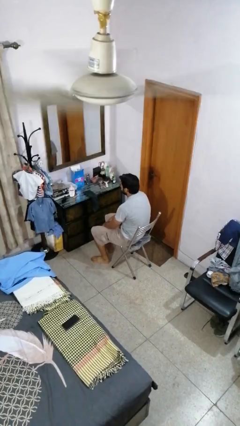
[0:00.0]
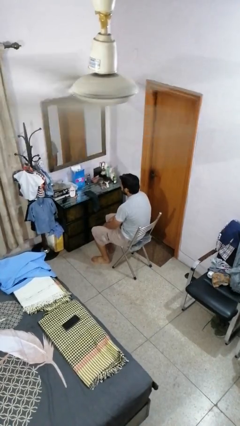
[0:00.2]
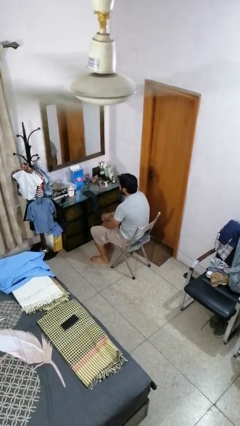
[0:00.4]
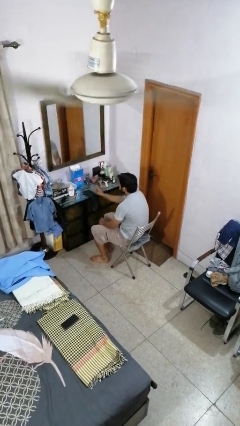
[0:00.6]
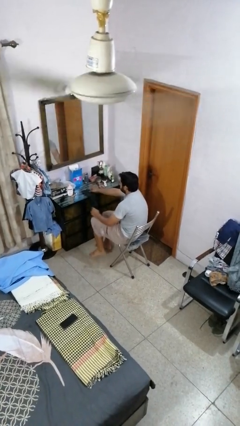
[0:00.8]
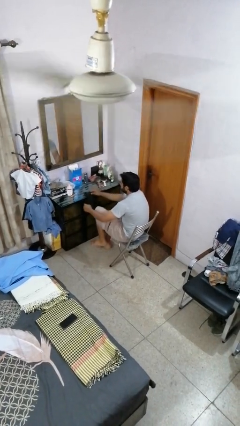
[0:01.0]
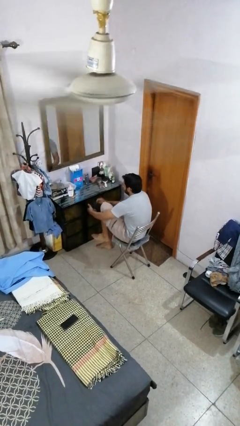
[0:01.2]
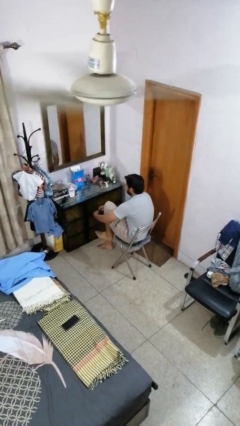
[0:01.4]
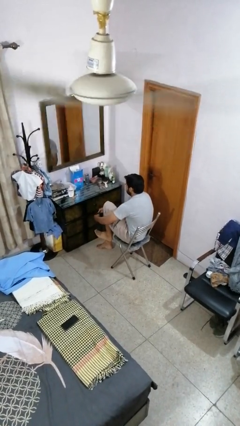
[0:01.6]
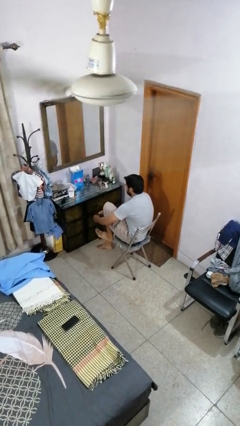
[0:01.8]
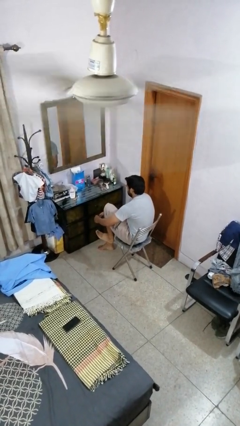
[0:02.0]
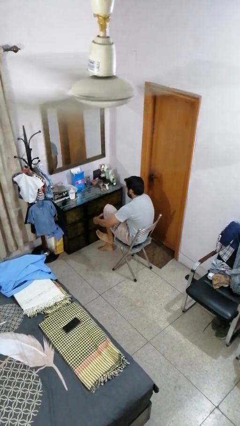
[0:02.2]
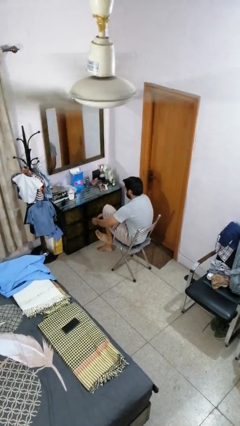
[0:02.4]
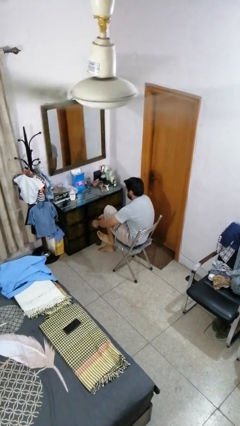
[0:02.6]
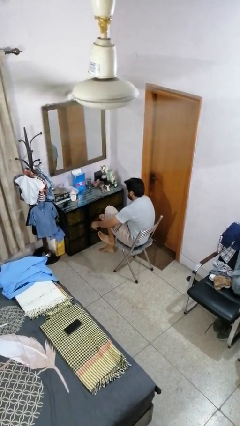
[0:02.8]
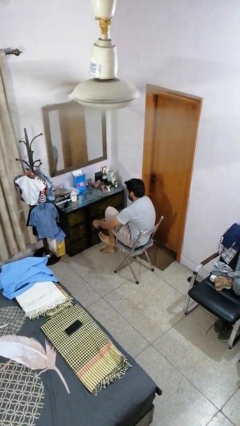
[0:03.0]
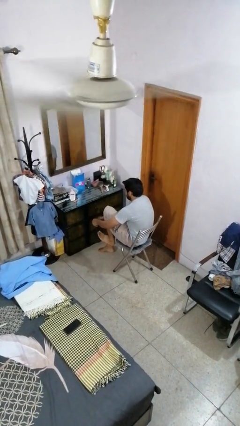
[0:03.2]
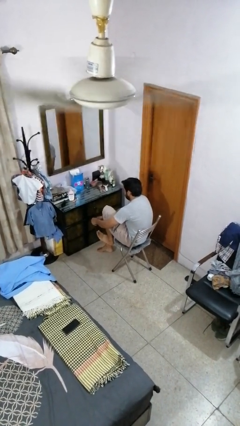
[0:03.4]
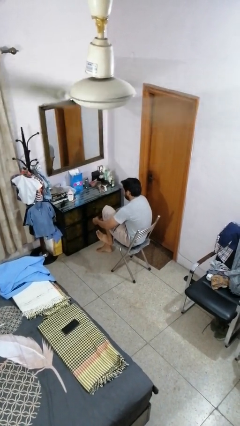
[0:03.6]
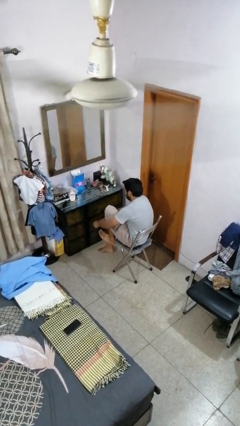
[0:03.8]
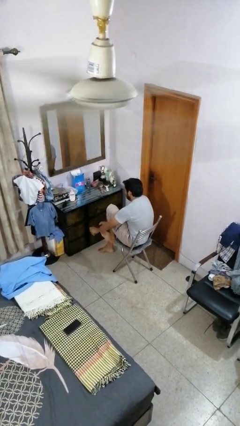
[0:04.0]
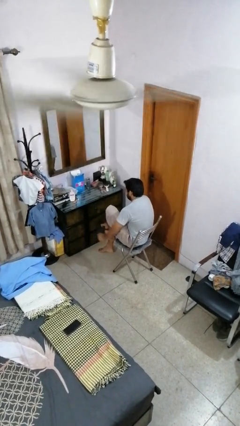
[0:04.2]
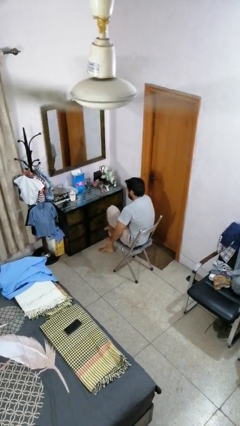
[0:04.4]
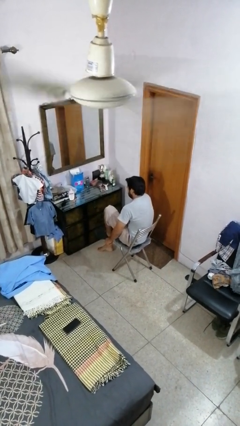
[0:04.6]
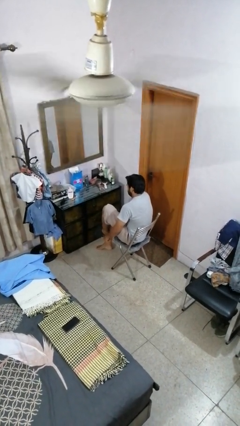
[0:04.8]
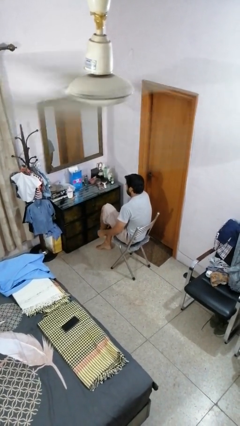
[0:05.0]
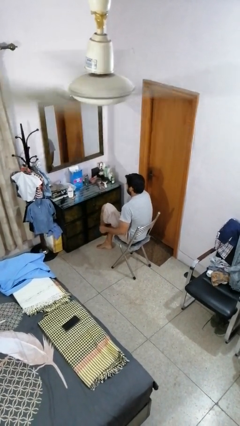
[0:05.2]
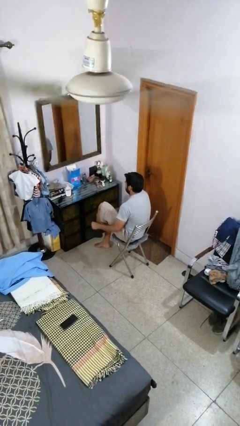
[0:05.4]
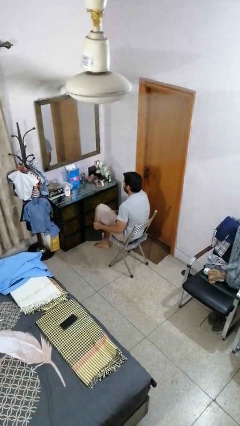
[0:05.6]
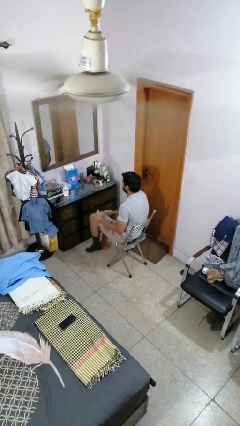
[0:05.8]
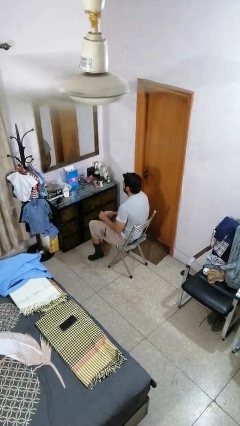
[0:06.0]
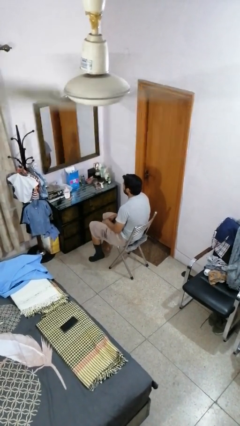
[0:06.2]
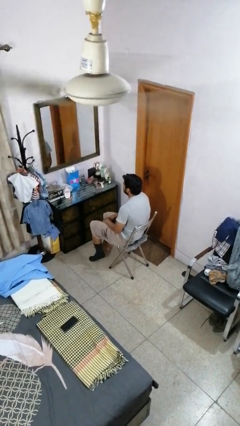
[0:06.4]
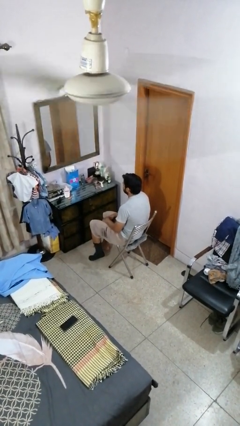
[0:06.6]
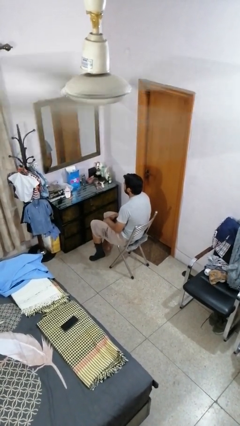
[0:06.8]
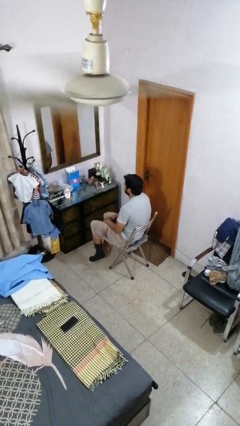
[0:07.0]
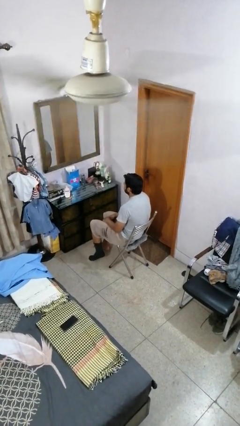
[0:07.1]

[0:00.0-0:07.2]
person puts on socks

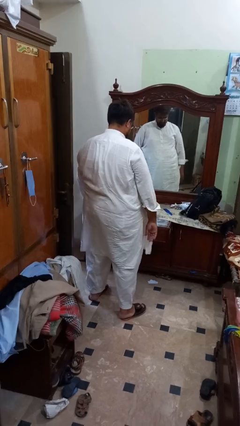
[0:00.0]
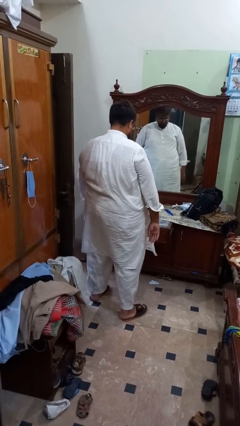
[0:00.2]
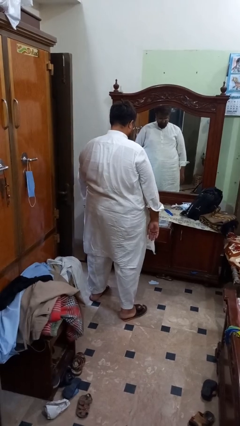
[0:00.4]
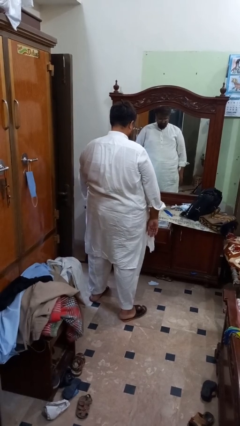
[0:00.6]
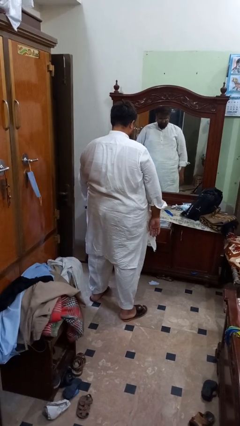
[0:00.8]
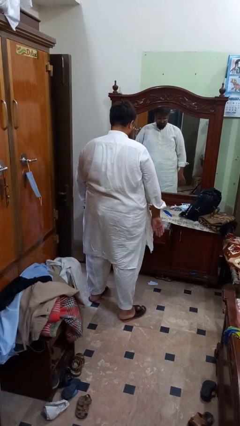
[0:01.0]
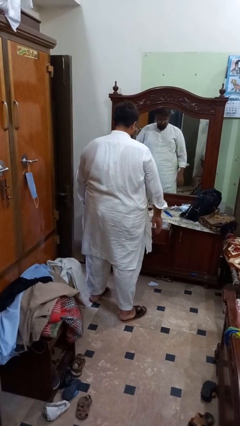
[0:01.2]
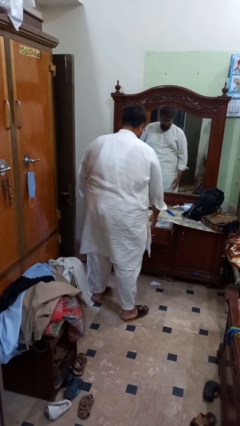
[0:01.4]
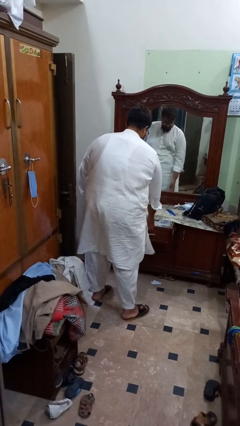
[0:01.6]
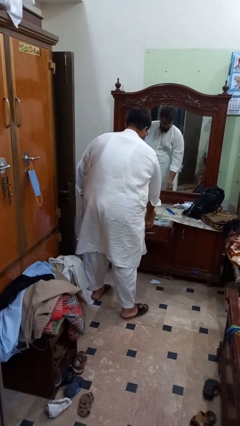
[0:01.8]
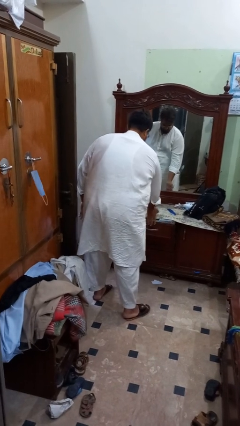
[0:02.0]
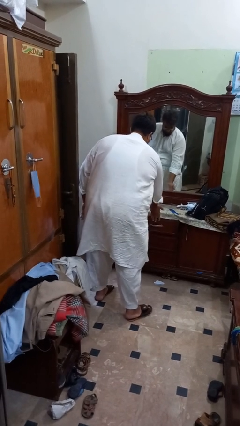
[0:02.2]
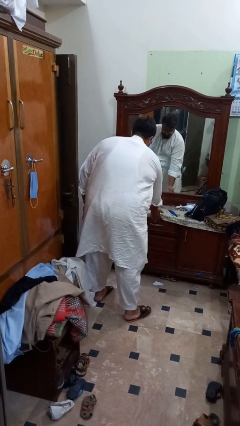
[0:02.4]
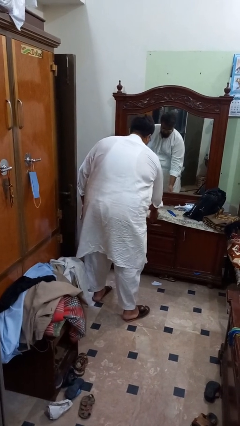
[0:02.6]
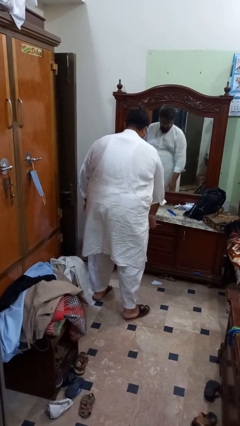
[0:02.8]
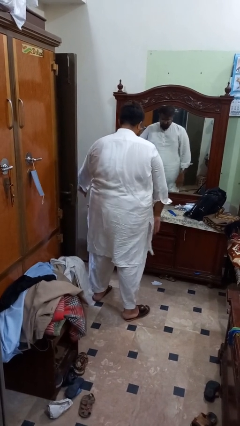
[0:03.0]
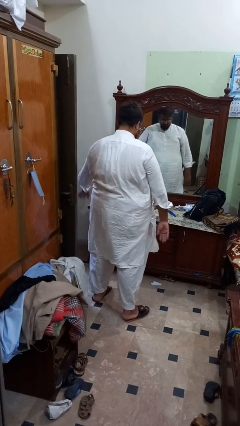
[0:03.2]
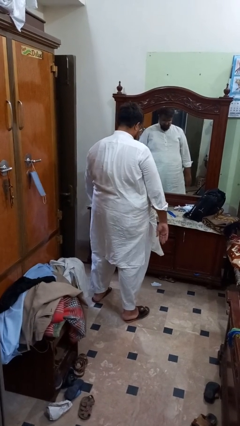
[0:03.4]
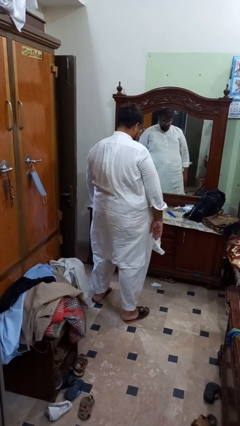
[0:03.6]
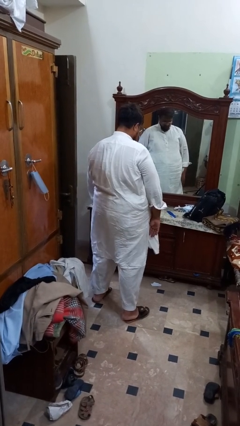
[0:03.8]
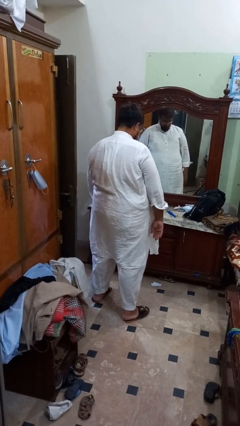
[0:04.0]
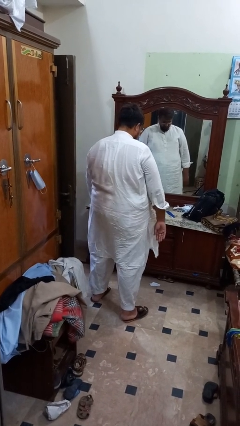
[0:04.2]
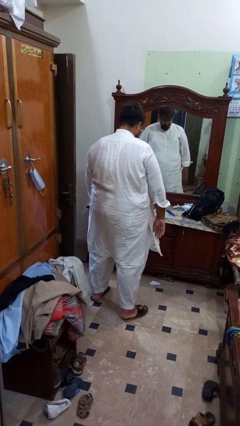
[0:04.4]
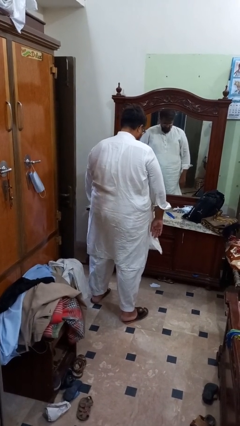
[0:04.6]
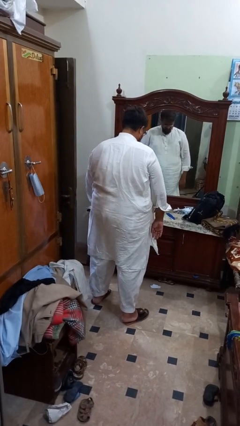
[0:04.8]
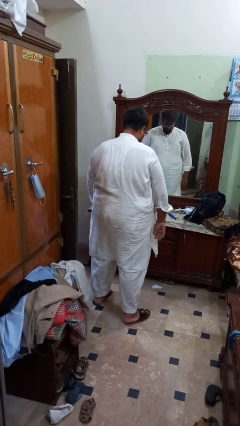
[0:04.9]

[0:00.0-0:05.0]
person closes dresser drawer

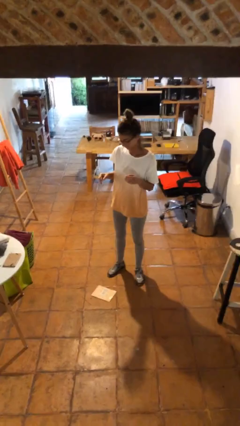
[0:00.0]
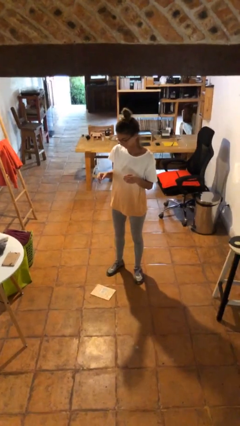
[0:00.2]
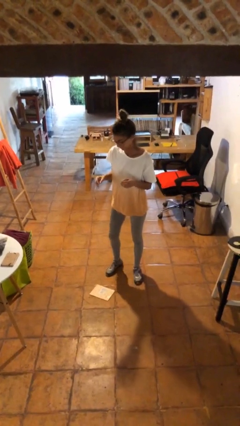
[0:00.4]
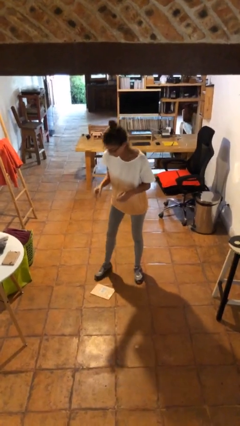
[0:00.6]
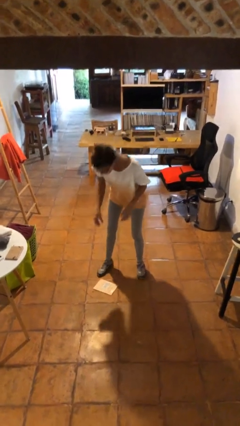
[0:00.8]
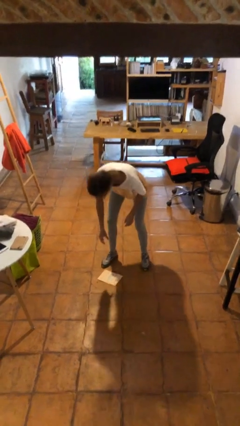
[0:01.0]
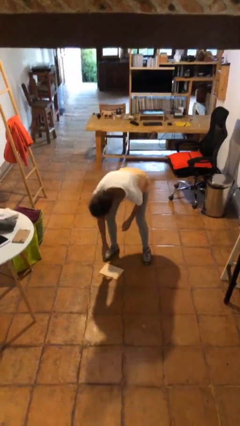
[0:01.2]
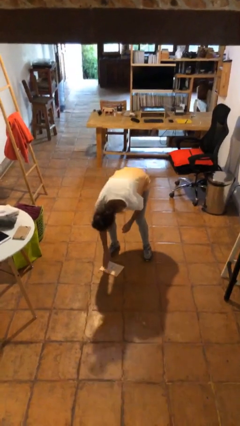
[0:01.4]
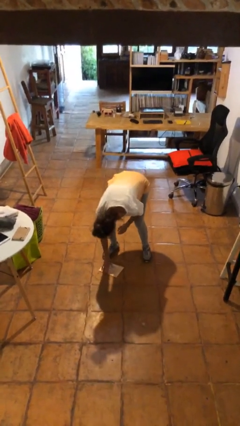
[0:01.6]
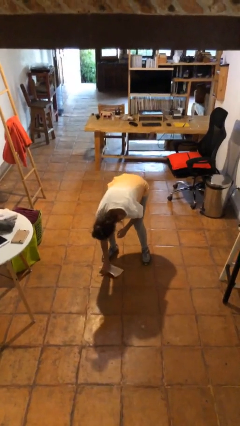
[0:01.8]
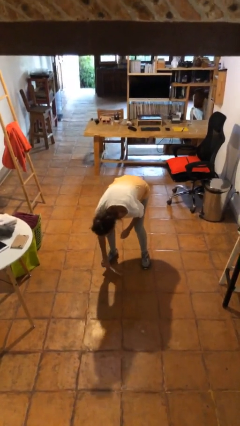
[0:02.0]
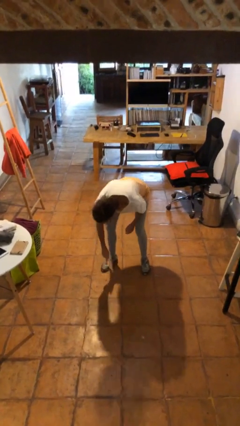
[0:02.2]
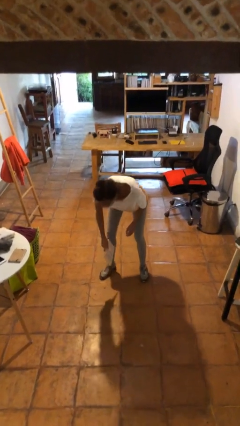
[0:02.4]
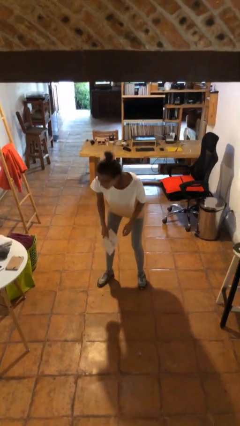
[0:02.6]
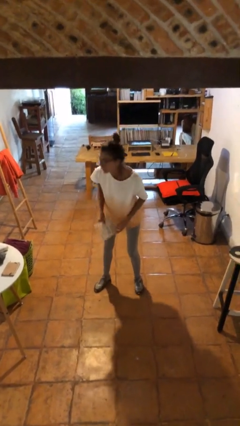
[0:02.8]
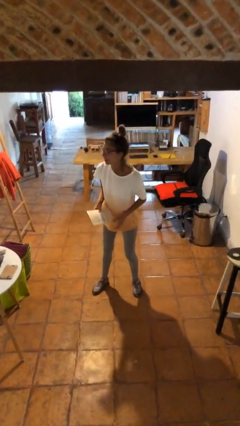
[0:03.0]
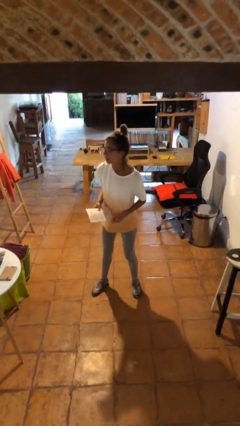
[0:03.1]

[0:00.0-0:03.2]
person picks up object from floor

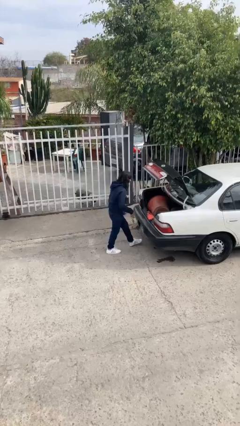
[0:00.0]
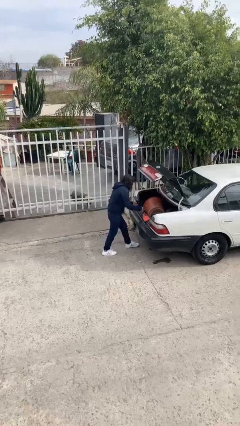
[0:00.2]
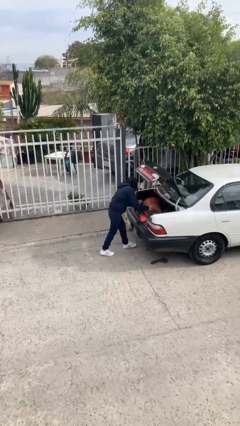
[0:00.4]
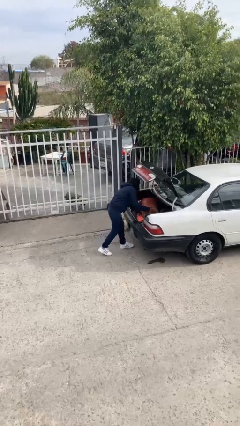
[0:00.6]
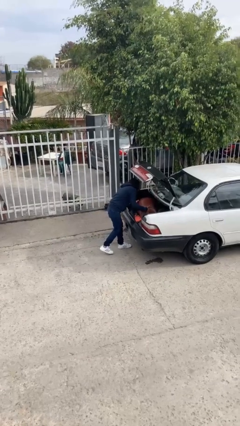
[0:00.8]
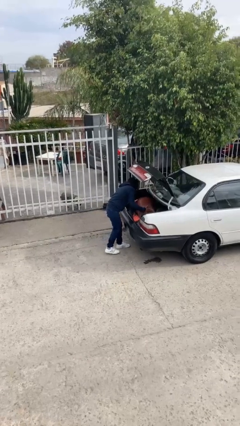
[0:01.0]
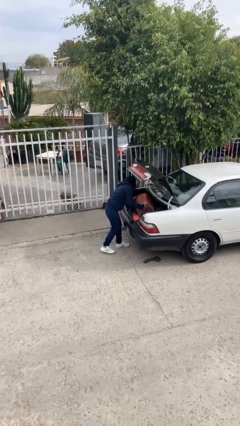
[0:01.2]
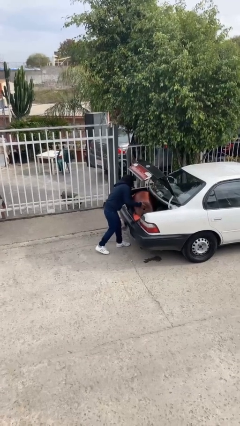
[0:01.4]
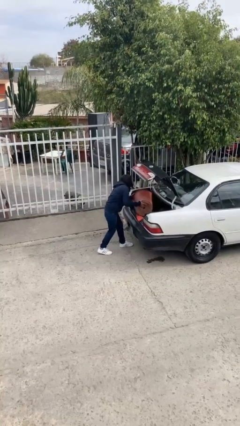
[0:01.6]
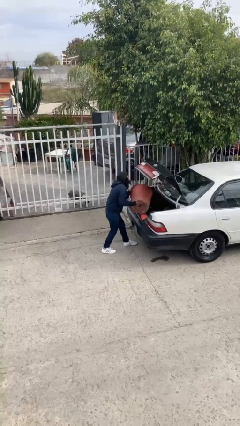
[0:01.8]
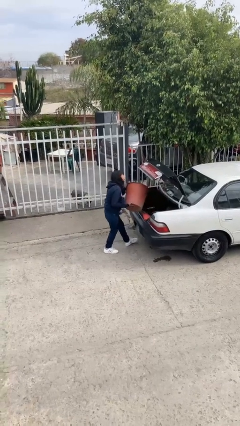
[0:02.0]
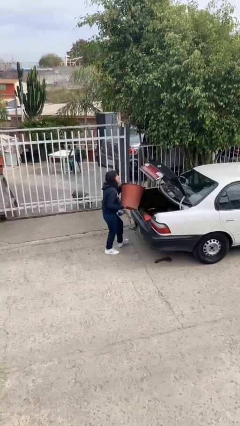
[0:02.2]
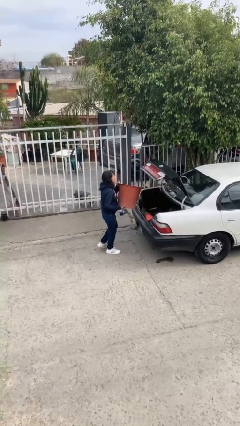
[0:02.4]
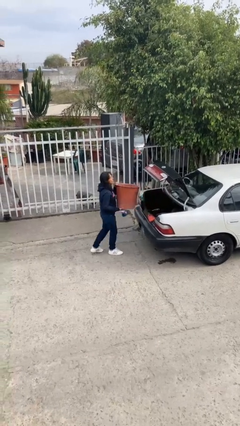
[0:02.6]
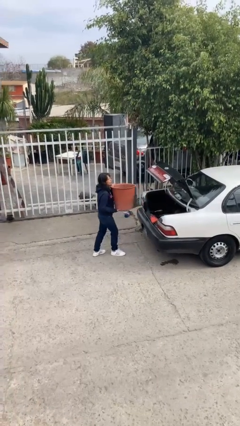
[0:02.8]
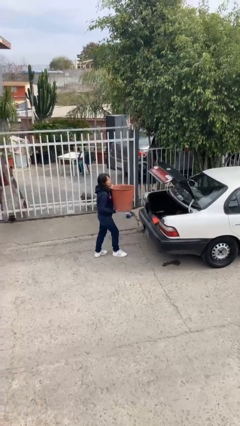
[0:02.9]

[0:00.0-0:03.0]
person unloads car
